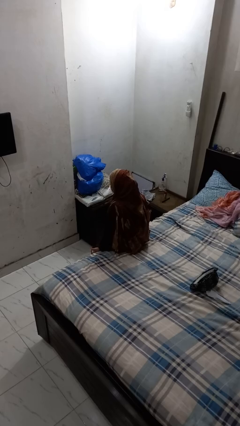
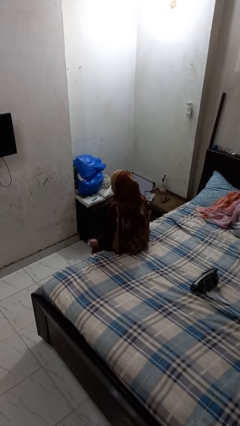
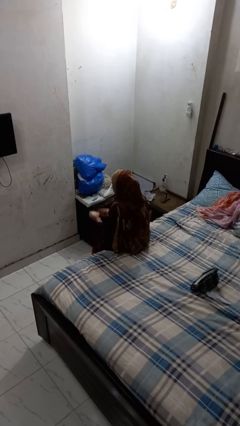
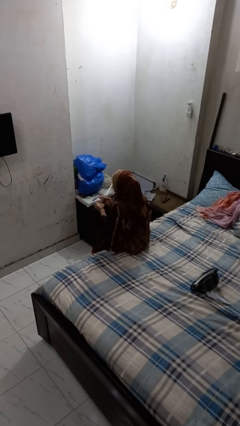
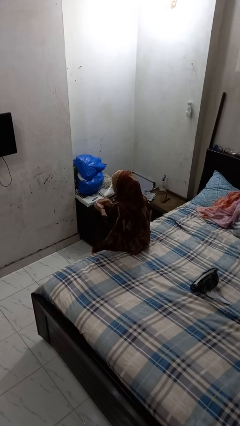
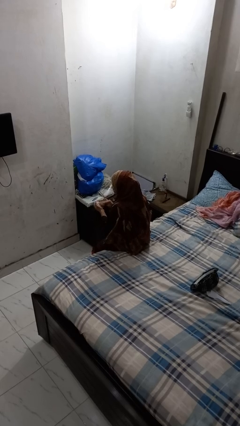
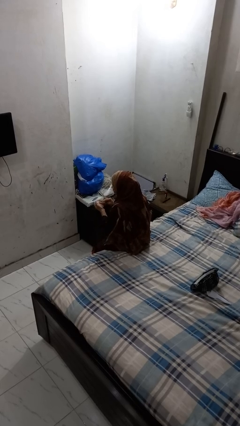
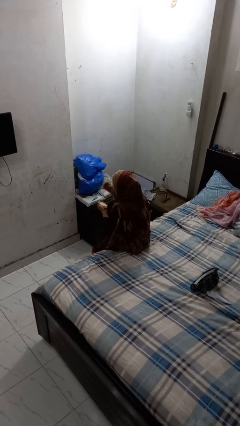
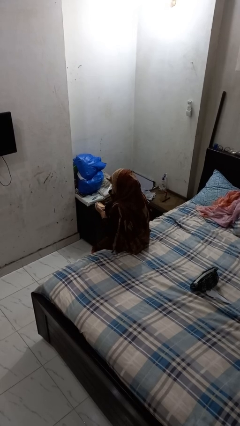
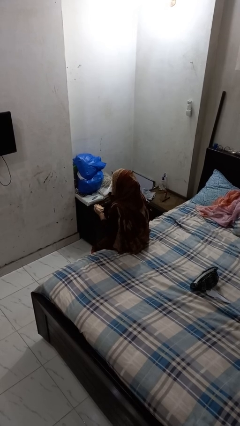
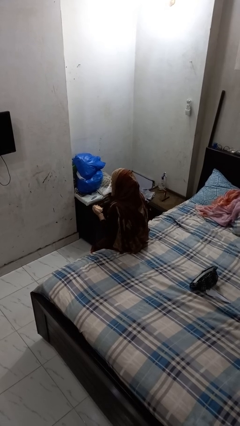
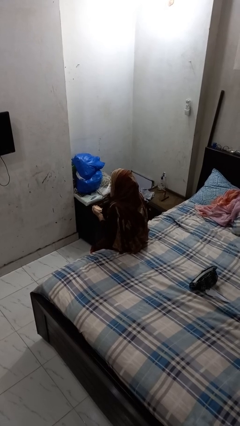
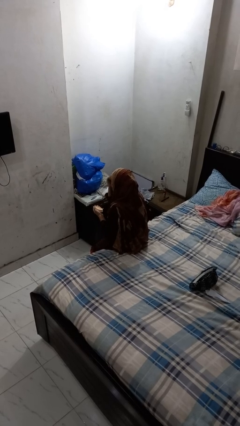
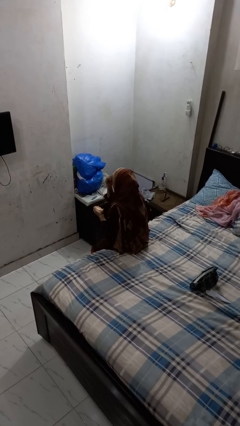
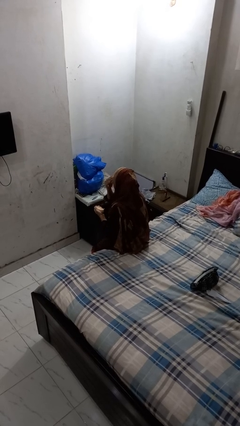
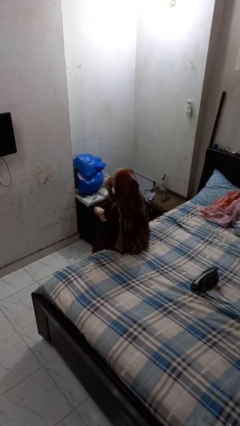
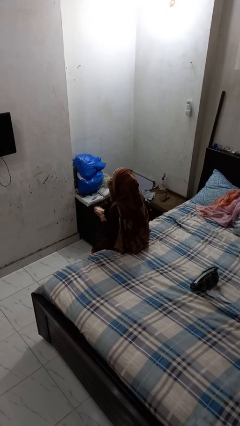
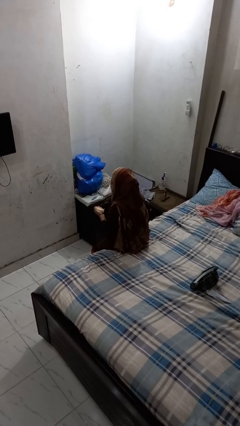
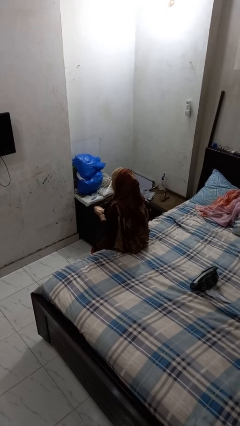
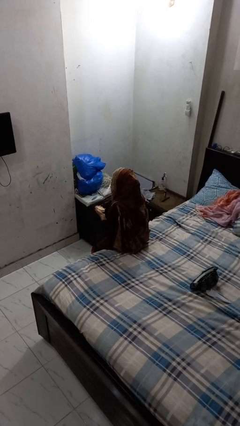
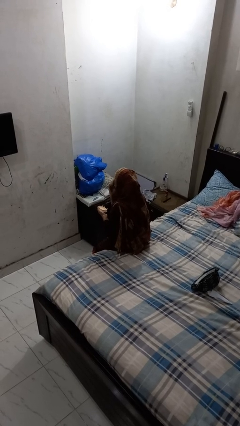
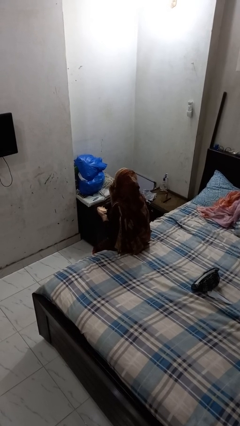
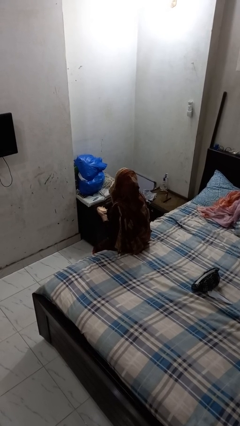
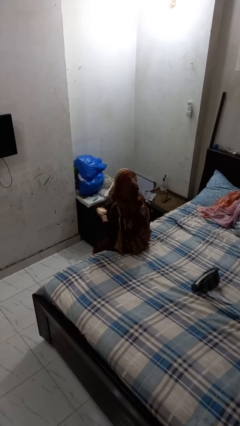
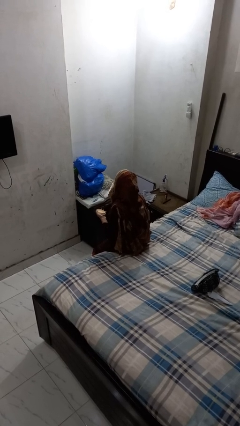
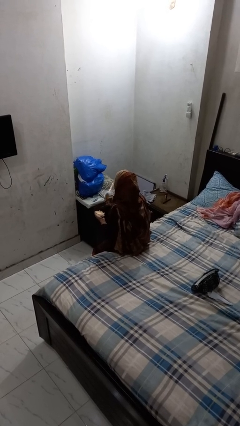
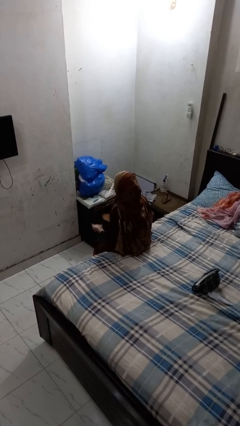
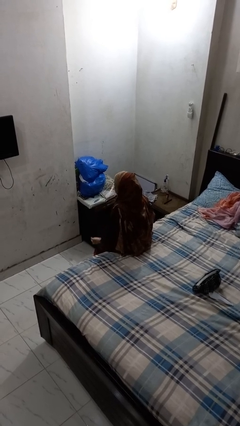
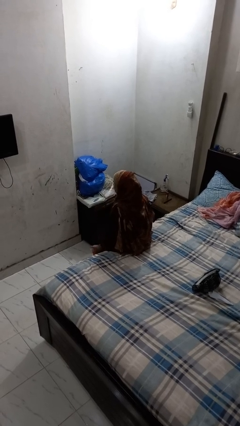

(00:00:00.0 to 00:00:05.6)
person applies foundation makeup

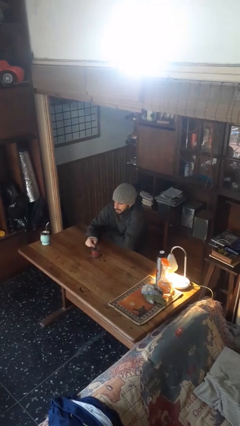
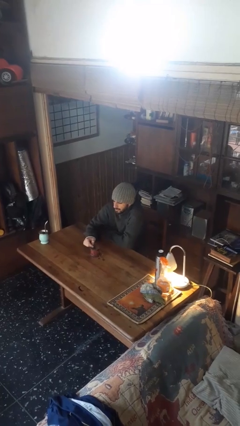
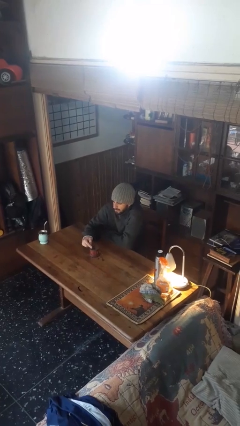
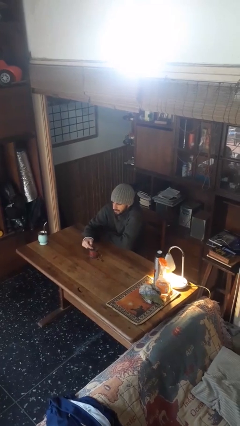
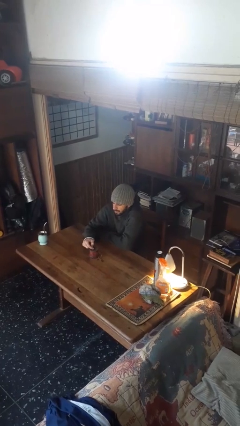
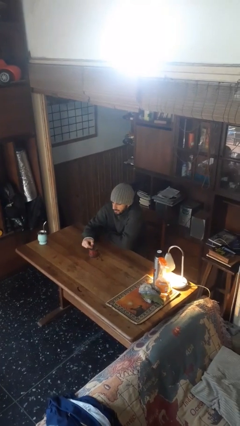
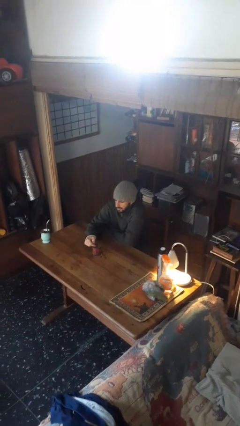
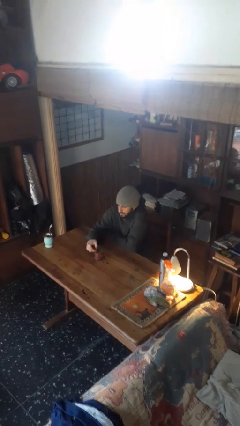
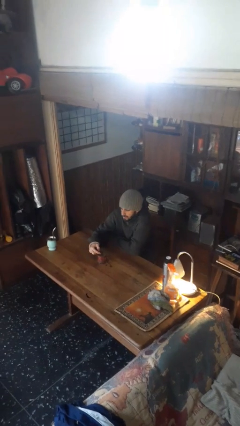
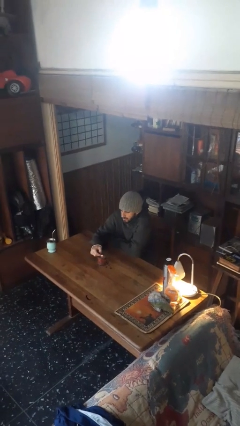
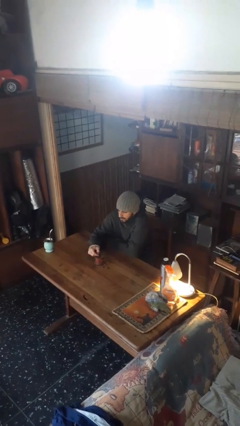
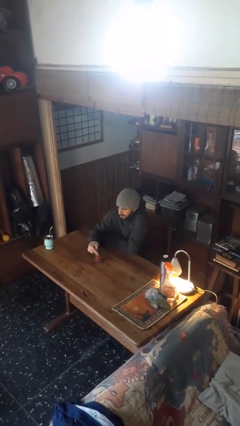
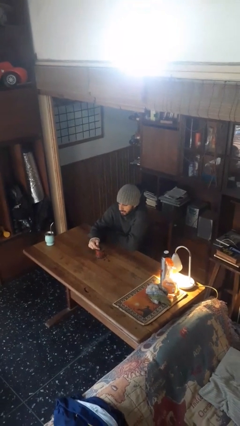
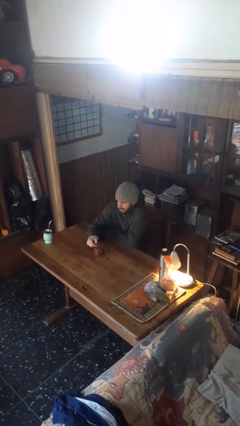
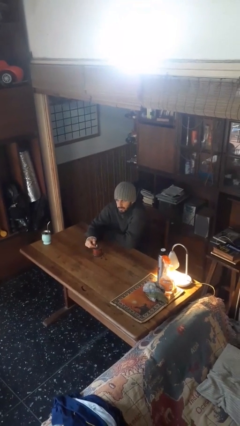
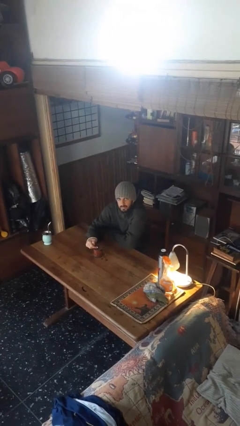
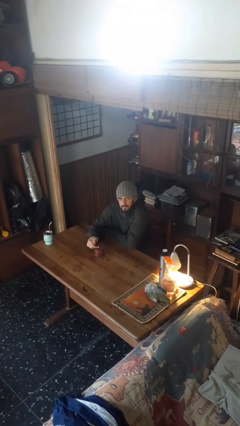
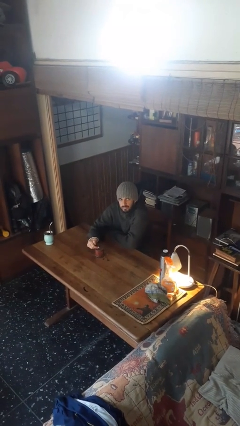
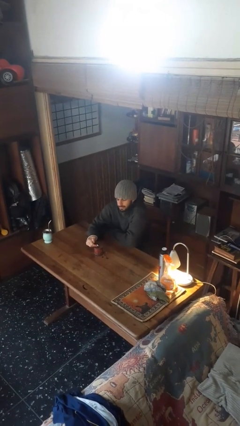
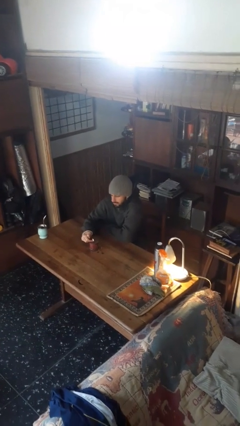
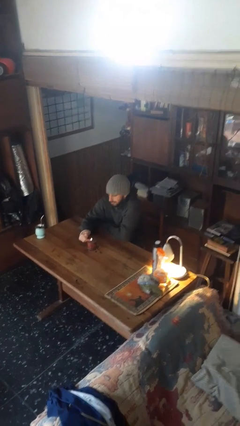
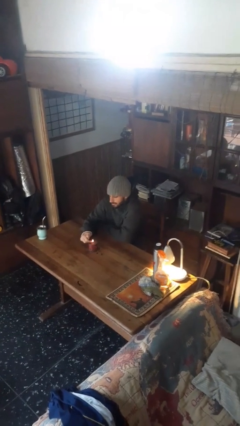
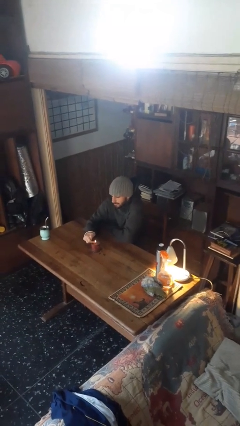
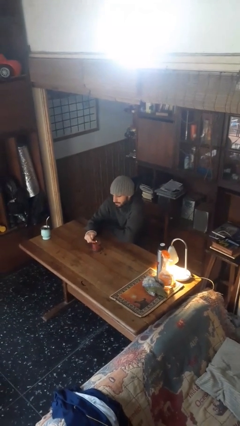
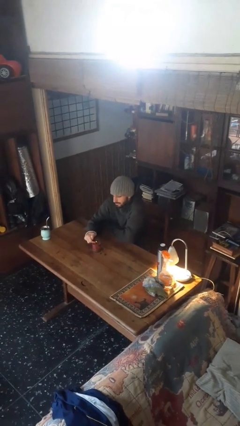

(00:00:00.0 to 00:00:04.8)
person lights candle

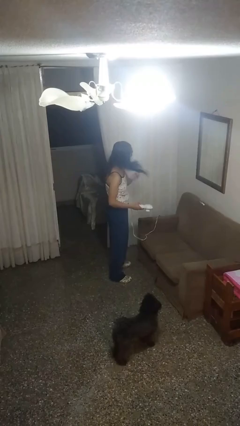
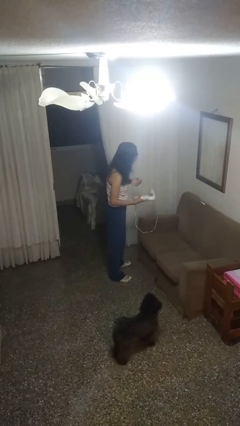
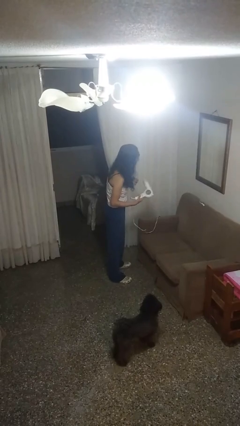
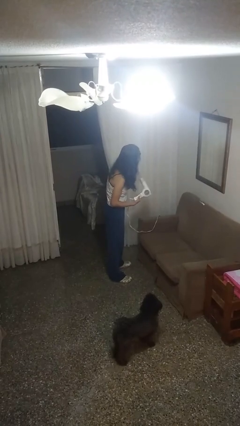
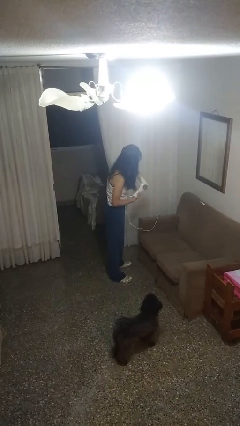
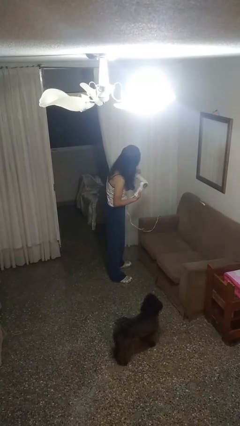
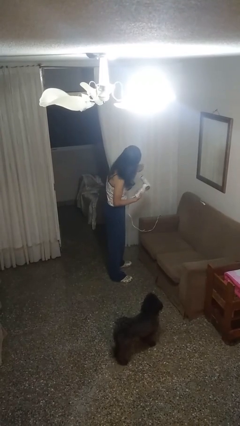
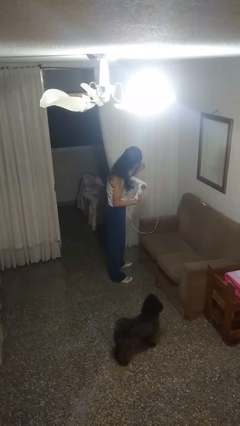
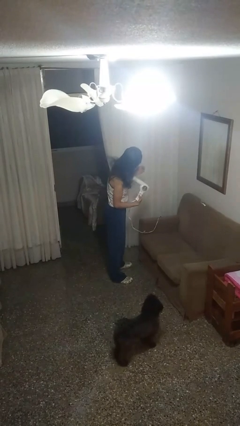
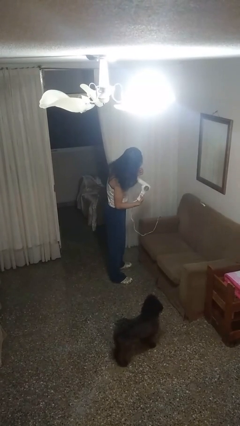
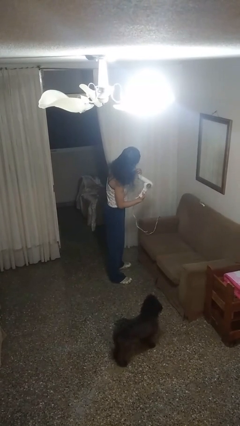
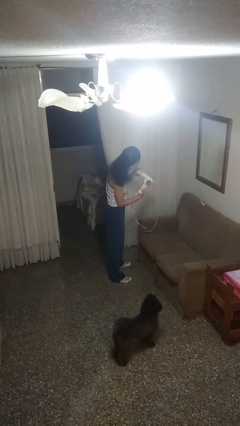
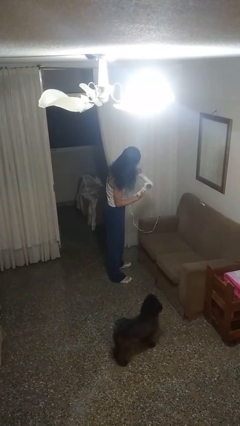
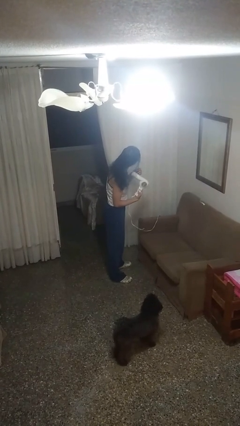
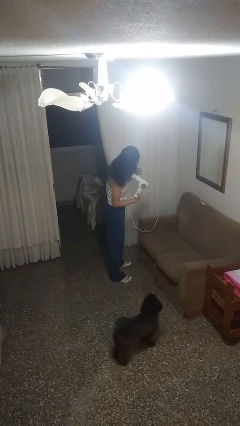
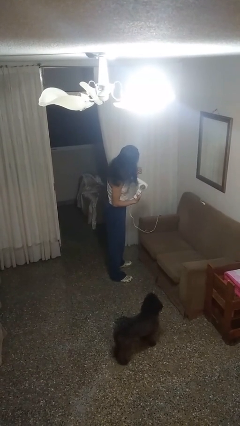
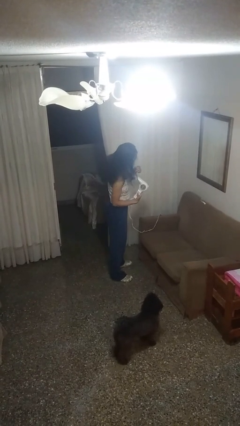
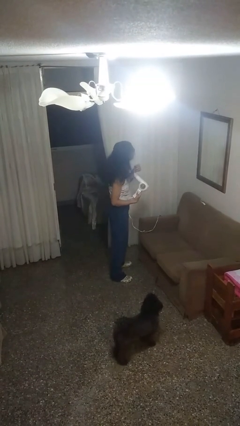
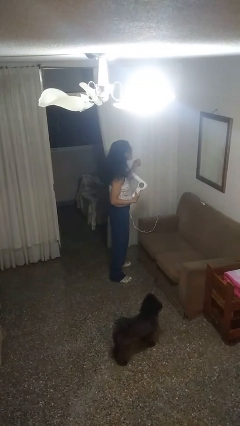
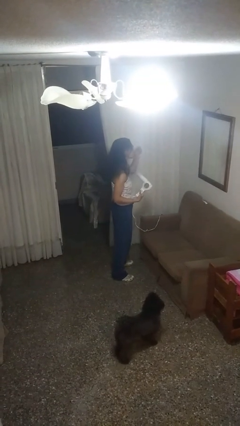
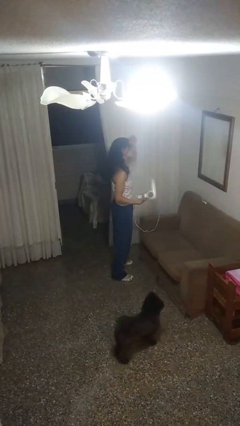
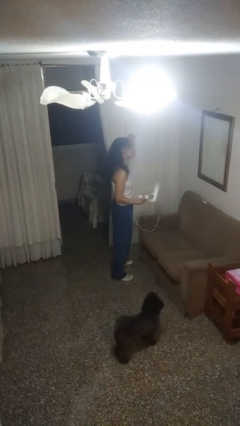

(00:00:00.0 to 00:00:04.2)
person dries hair with hairdryer

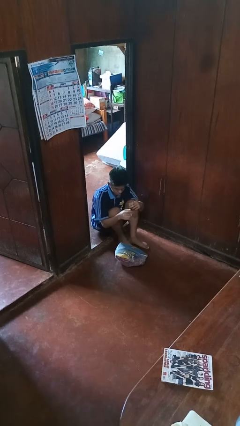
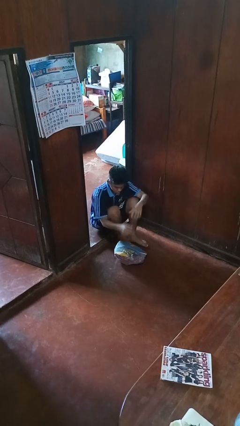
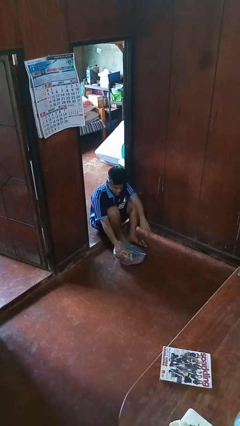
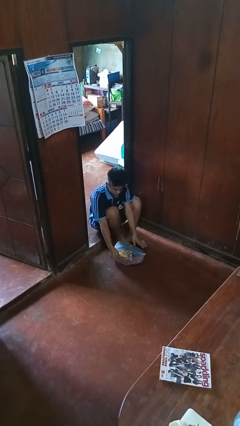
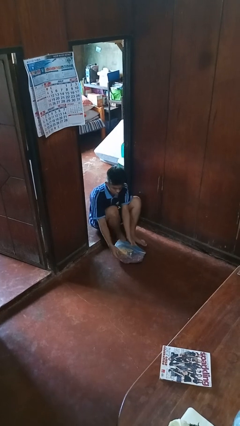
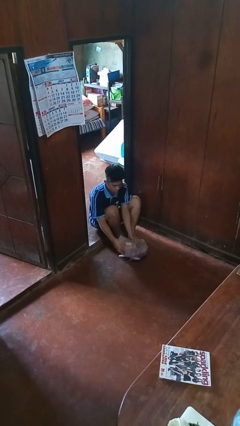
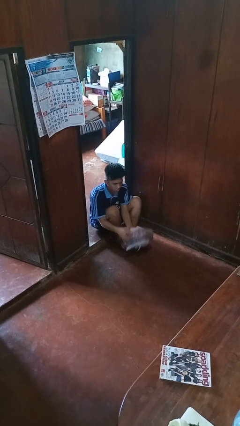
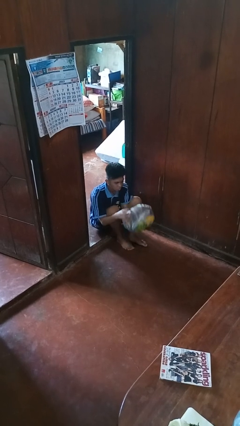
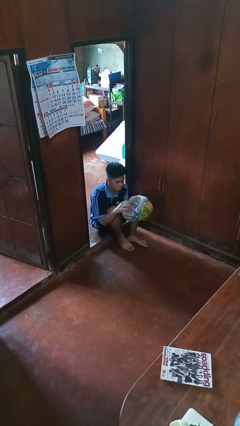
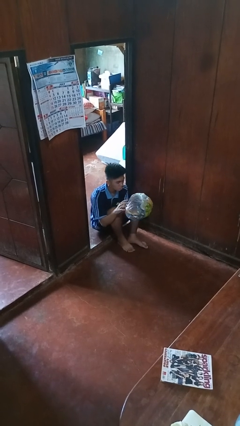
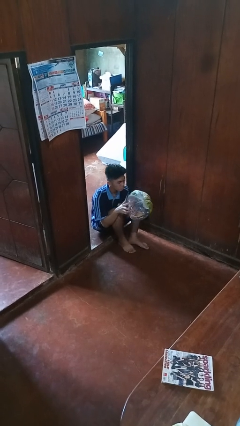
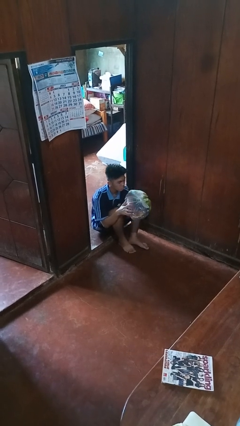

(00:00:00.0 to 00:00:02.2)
person picks up object from floor

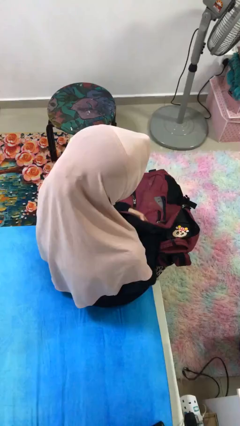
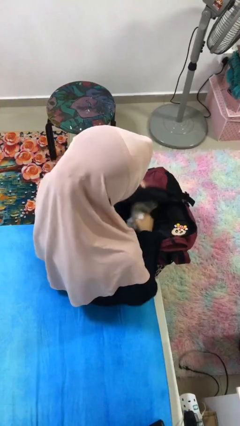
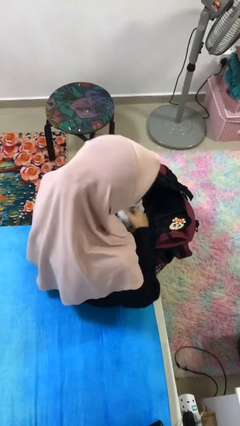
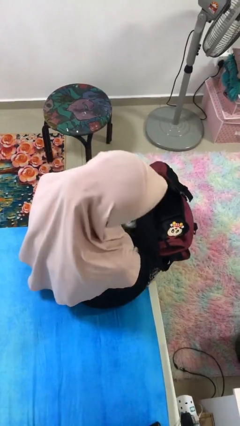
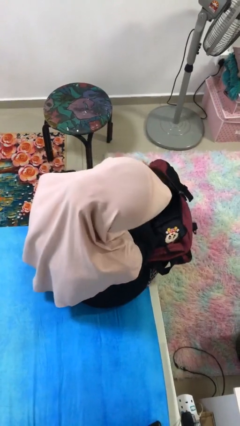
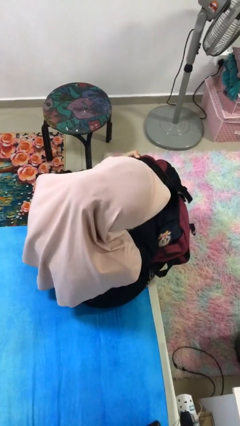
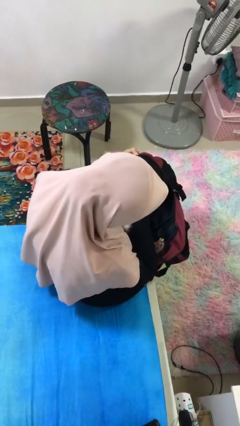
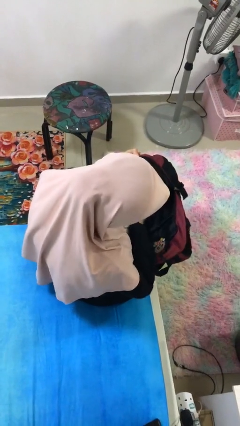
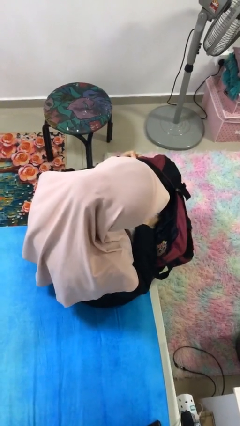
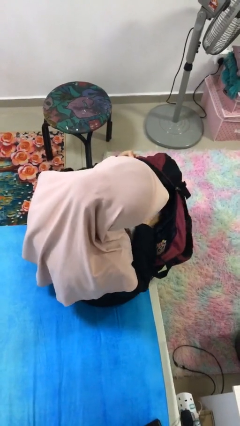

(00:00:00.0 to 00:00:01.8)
person searches in backpack
